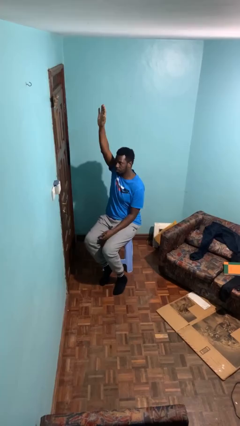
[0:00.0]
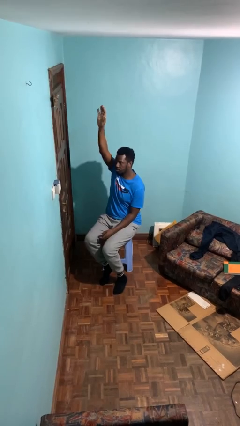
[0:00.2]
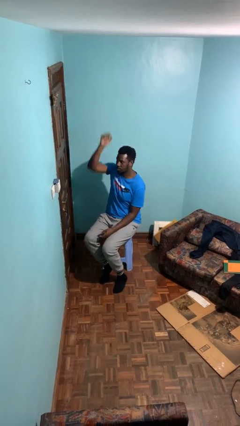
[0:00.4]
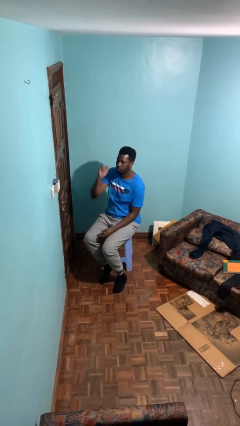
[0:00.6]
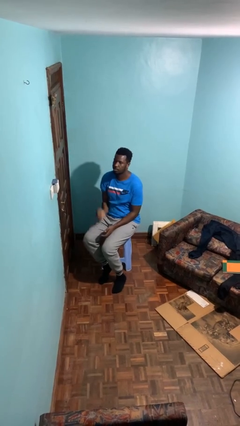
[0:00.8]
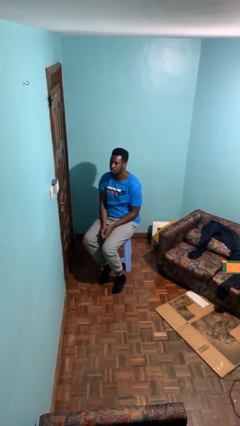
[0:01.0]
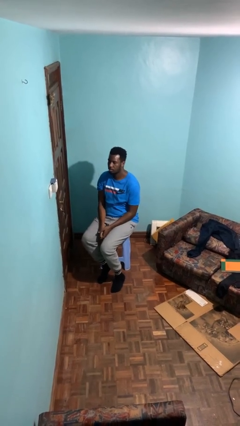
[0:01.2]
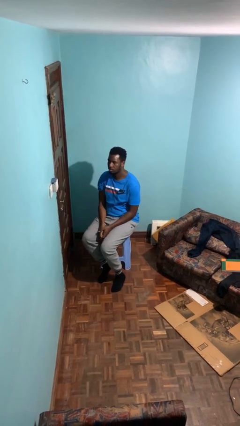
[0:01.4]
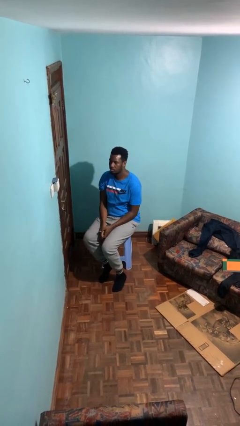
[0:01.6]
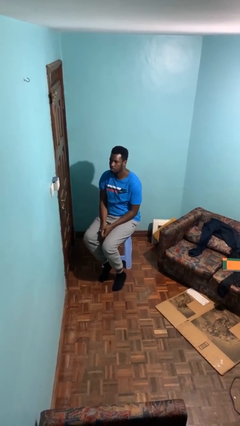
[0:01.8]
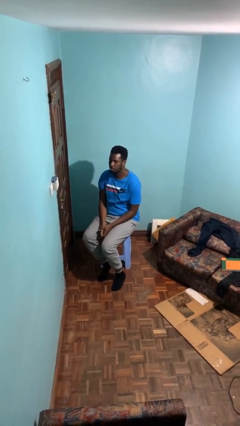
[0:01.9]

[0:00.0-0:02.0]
person gestures lower hand

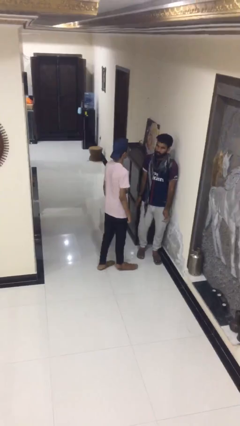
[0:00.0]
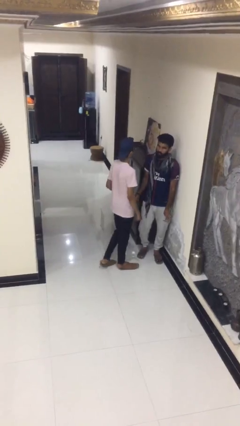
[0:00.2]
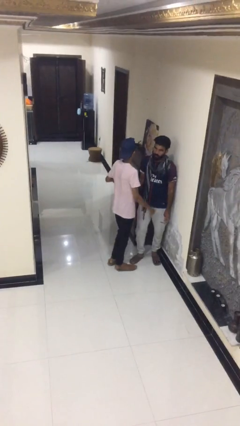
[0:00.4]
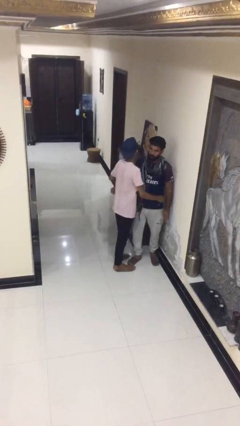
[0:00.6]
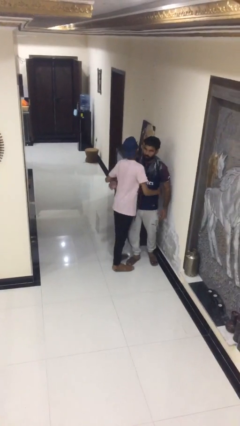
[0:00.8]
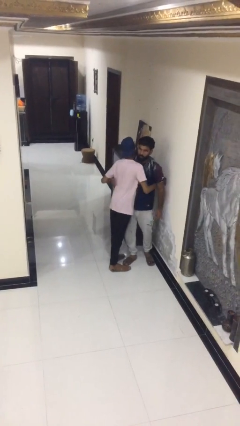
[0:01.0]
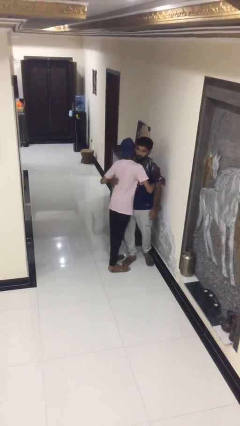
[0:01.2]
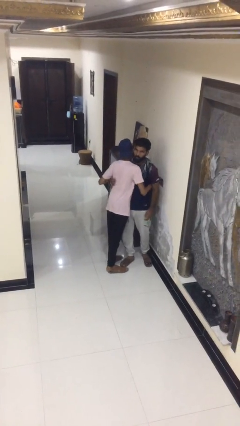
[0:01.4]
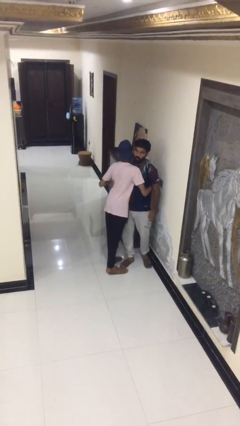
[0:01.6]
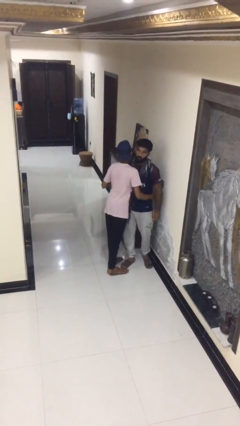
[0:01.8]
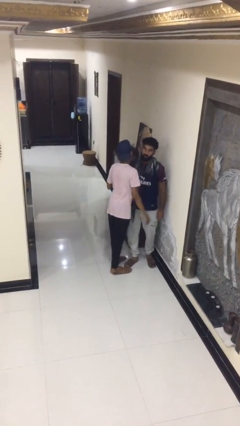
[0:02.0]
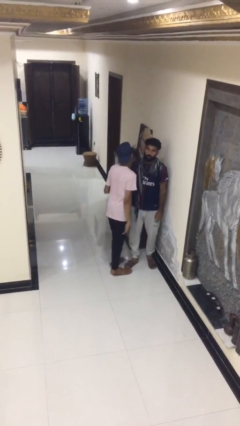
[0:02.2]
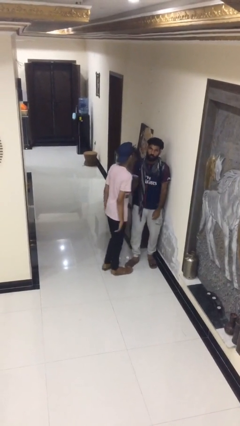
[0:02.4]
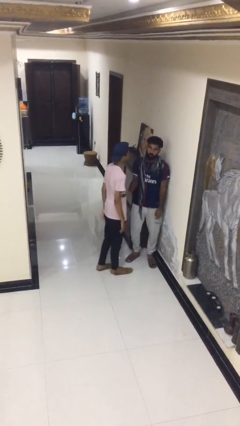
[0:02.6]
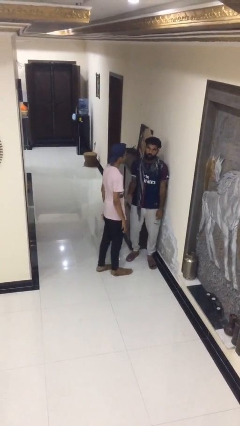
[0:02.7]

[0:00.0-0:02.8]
person embraces person

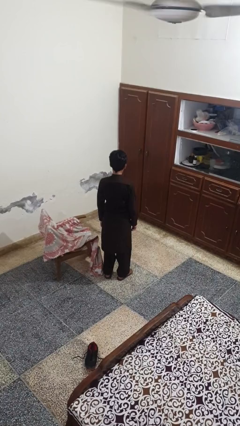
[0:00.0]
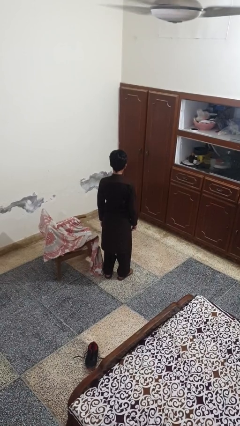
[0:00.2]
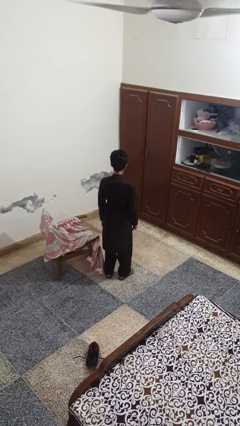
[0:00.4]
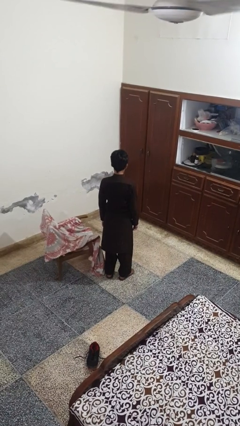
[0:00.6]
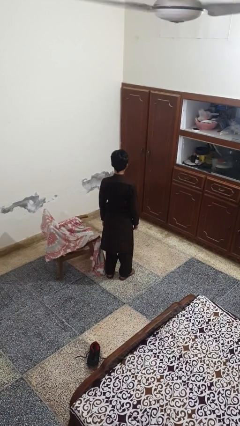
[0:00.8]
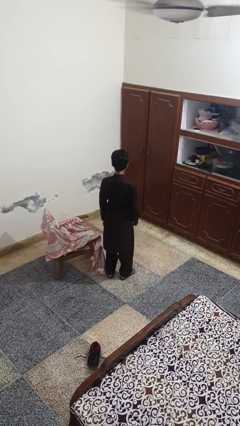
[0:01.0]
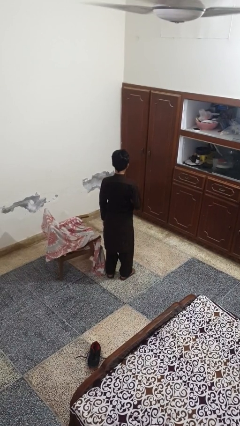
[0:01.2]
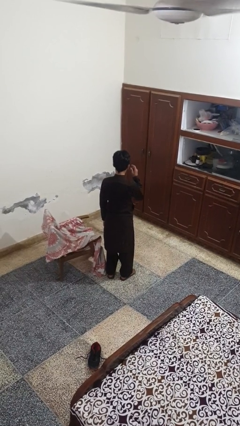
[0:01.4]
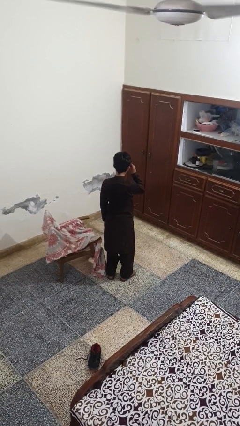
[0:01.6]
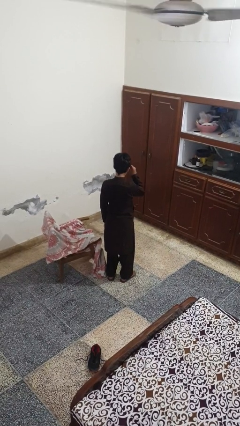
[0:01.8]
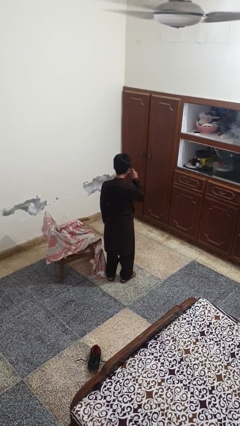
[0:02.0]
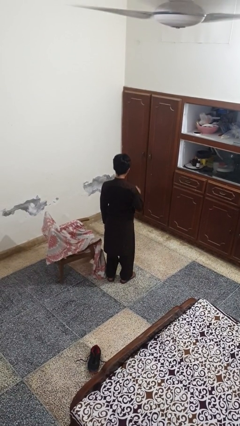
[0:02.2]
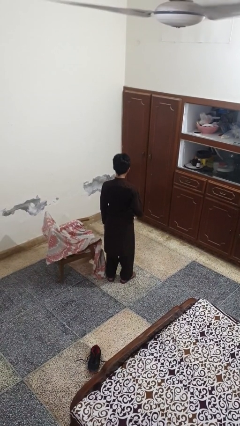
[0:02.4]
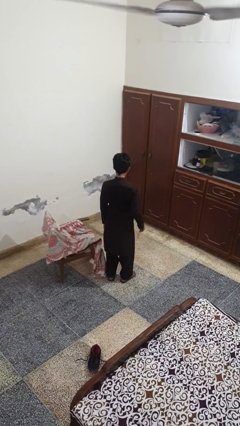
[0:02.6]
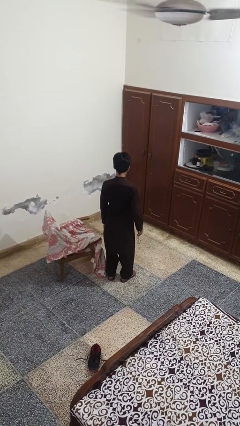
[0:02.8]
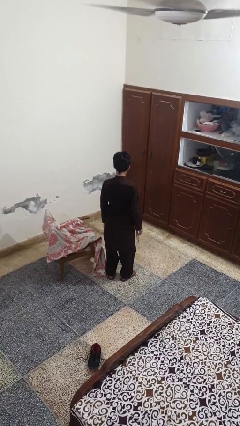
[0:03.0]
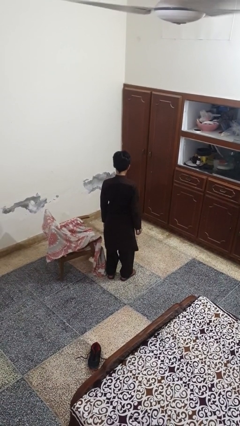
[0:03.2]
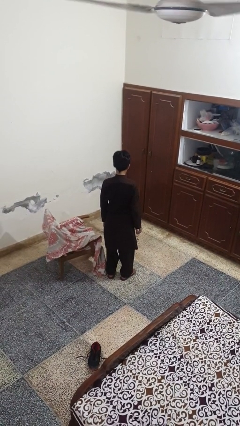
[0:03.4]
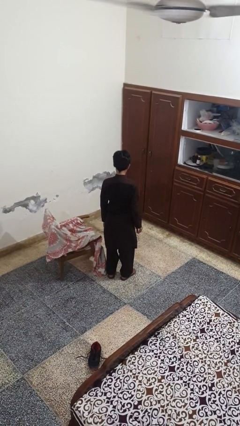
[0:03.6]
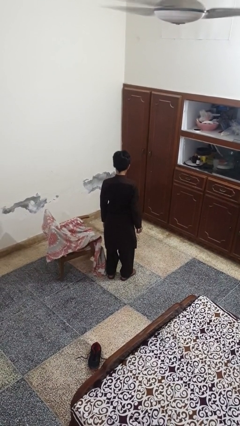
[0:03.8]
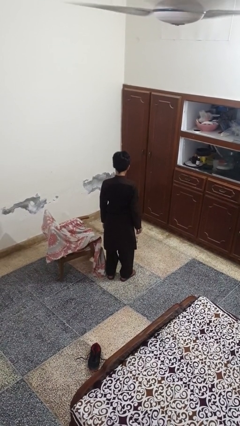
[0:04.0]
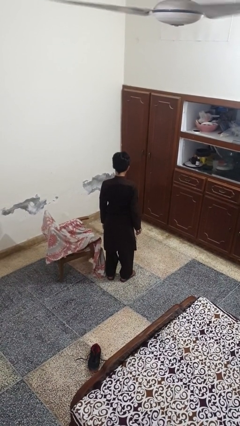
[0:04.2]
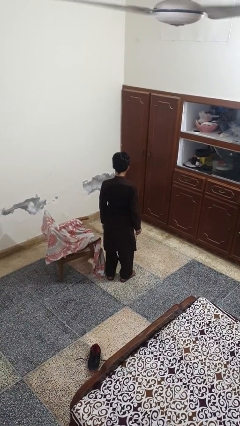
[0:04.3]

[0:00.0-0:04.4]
person takes off glasses

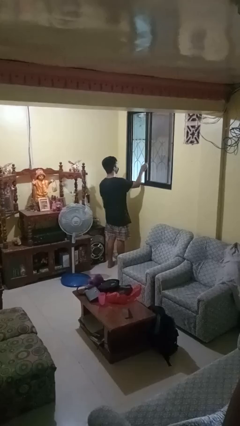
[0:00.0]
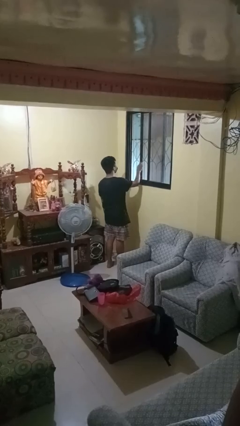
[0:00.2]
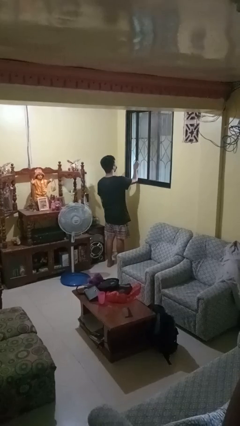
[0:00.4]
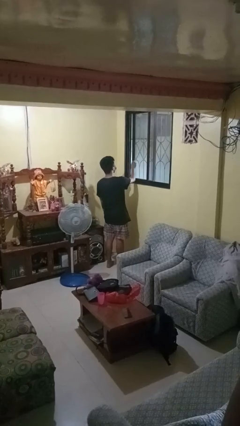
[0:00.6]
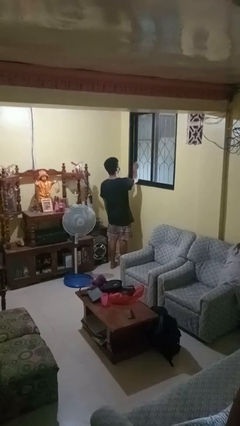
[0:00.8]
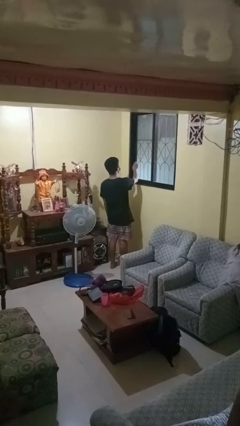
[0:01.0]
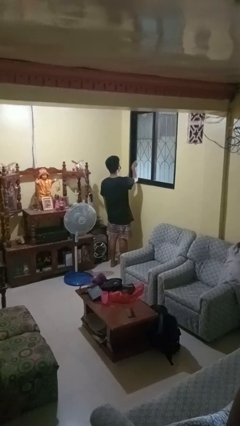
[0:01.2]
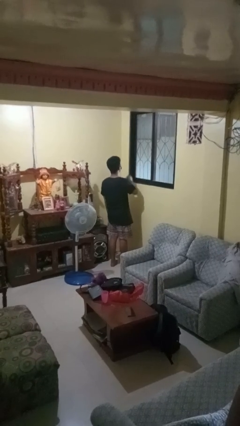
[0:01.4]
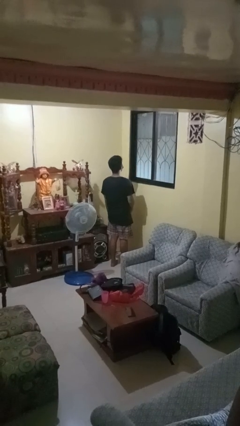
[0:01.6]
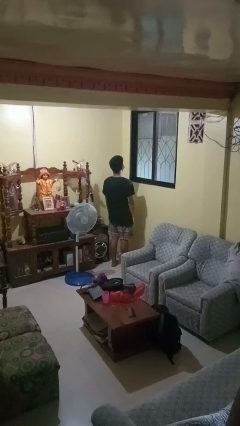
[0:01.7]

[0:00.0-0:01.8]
person closes home window

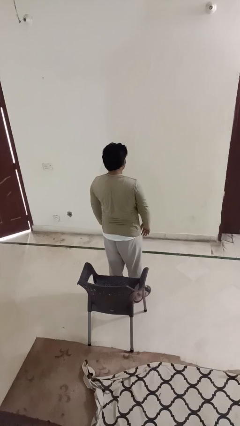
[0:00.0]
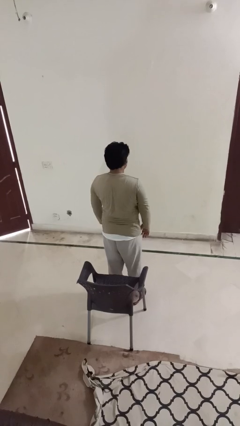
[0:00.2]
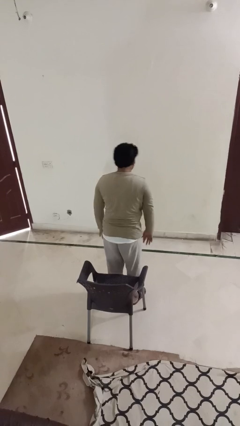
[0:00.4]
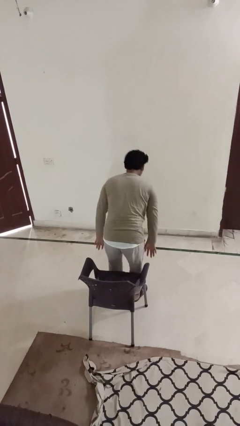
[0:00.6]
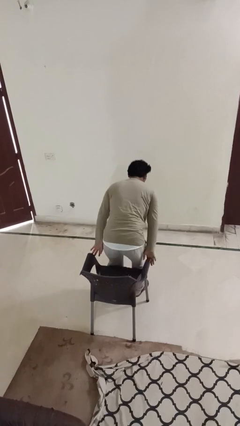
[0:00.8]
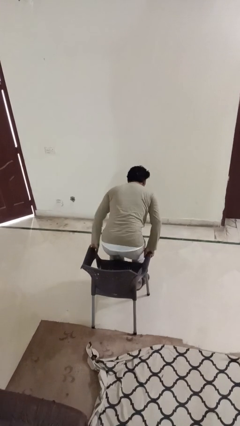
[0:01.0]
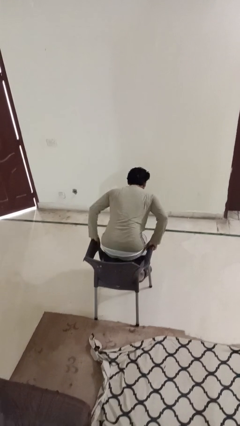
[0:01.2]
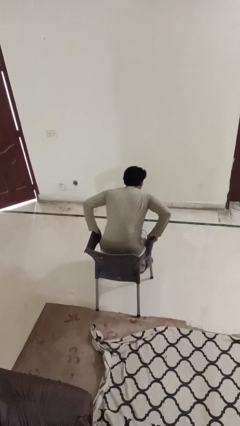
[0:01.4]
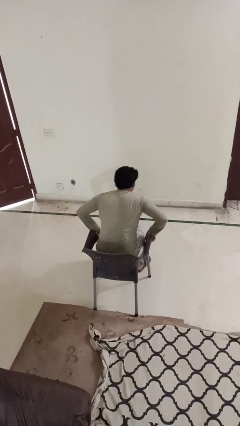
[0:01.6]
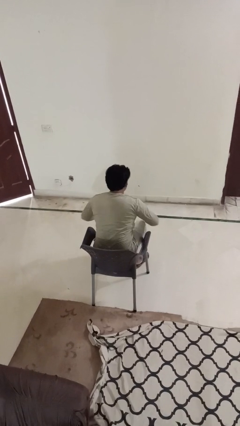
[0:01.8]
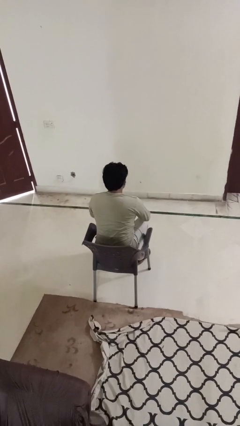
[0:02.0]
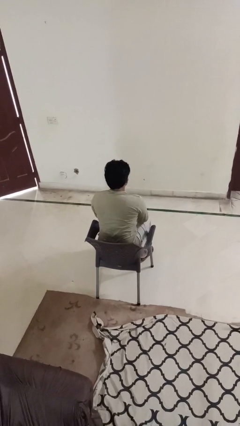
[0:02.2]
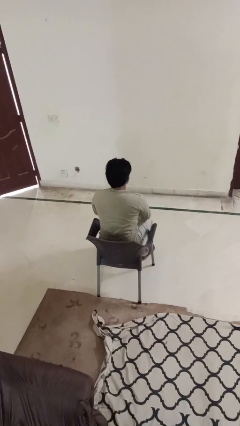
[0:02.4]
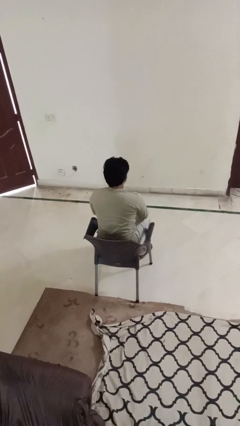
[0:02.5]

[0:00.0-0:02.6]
person sits down

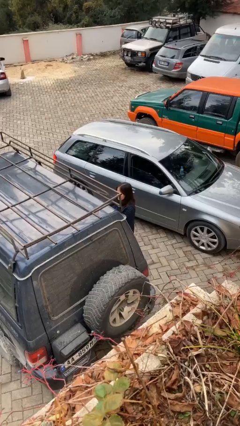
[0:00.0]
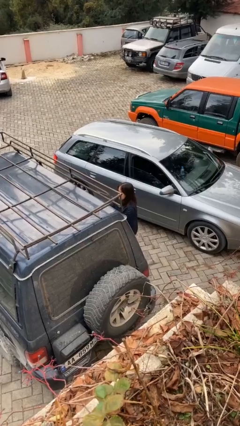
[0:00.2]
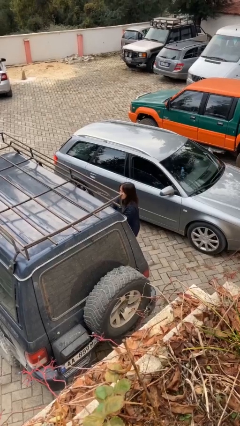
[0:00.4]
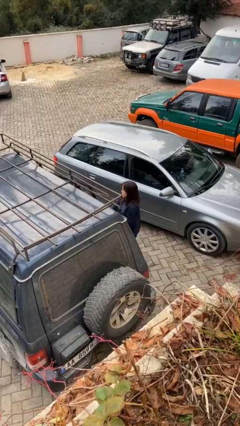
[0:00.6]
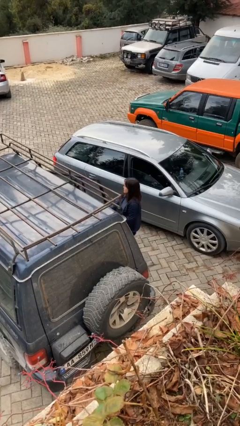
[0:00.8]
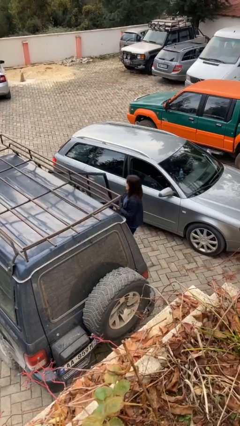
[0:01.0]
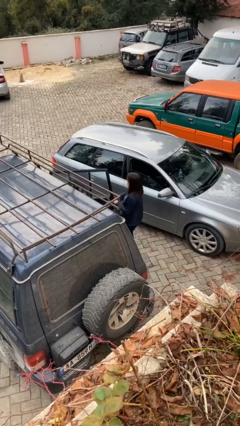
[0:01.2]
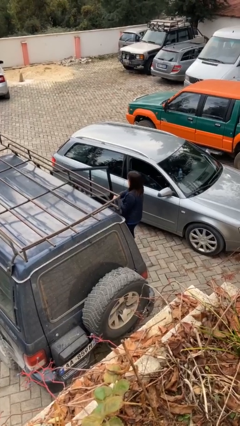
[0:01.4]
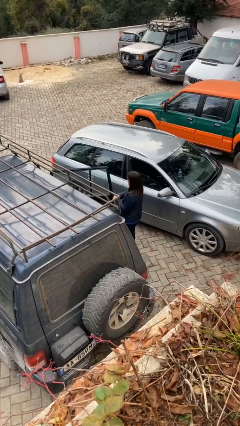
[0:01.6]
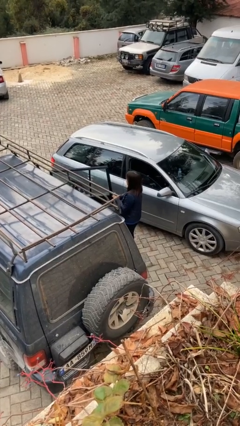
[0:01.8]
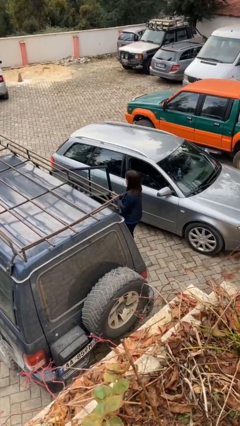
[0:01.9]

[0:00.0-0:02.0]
person opens car door

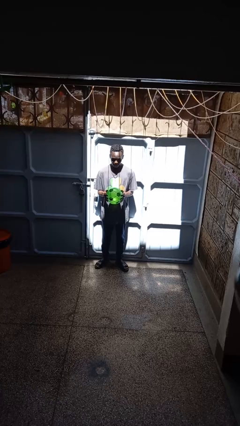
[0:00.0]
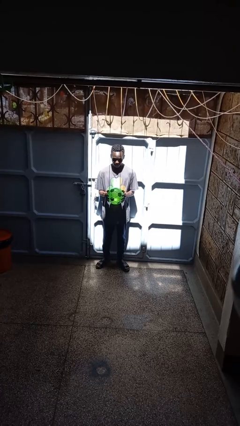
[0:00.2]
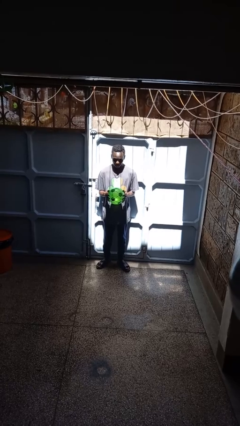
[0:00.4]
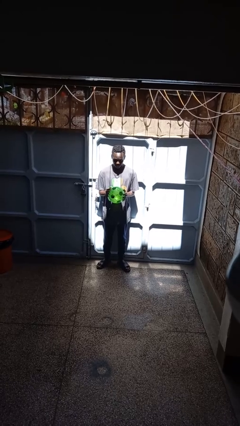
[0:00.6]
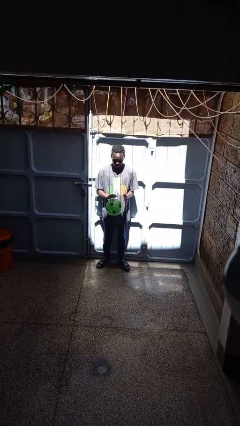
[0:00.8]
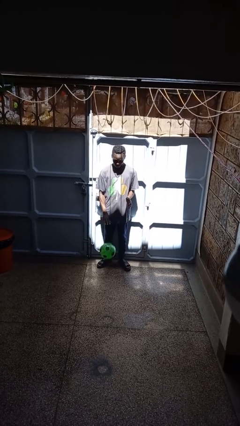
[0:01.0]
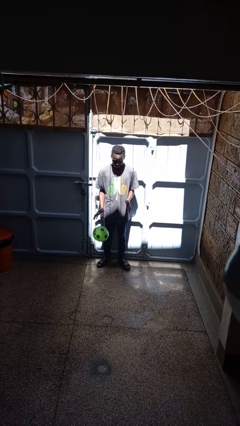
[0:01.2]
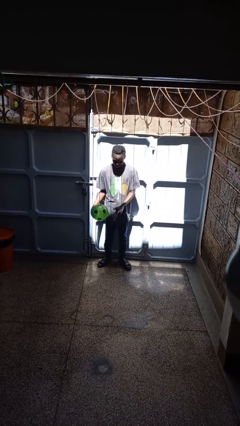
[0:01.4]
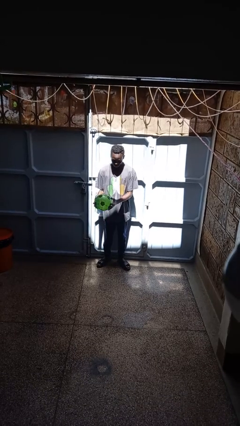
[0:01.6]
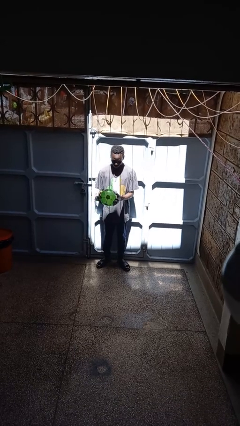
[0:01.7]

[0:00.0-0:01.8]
person bounces ball on floor
